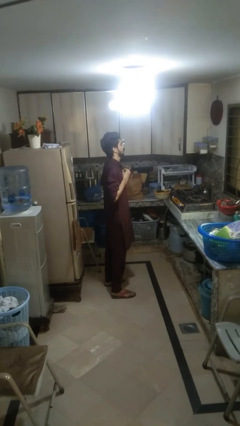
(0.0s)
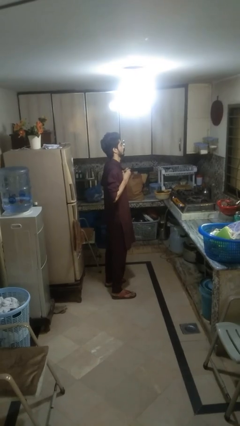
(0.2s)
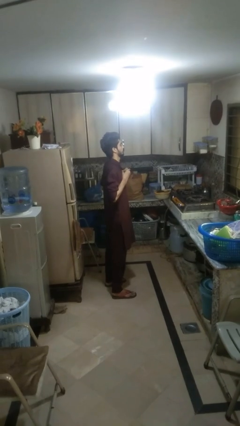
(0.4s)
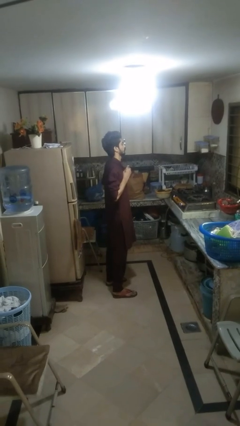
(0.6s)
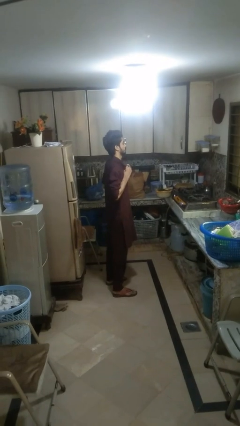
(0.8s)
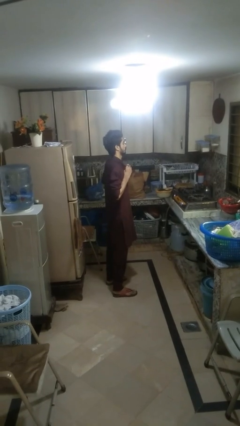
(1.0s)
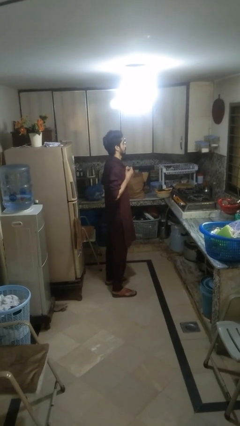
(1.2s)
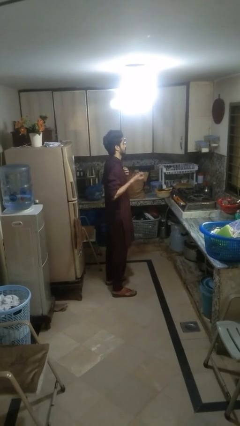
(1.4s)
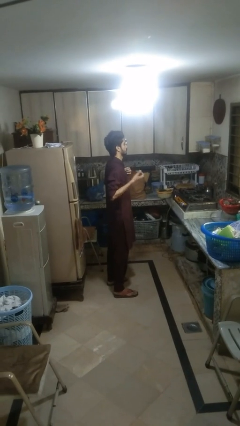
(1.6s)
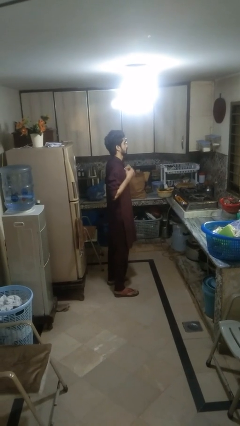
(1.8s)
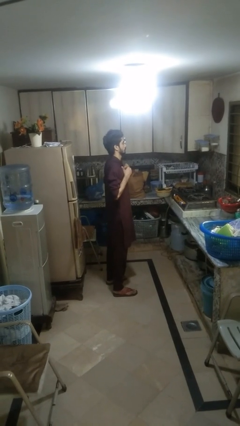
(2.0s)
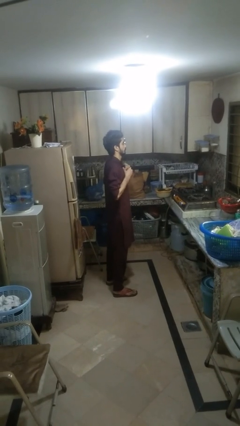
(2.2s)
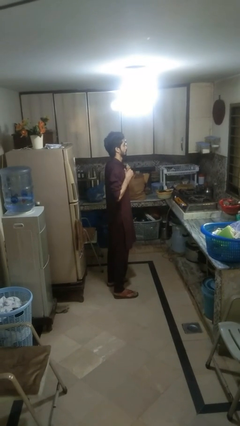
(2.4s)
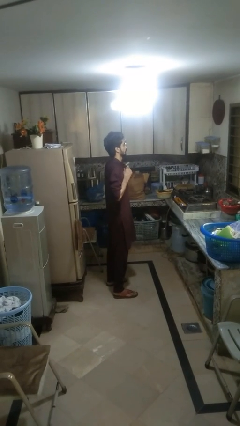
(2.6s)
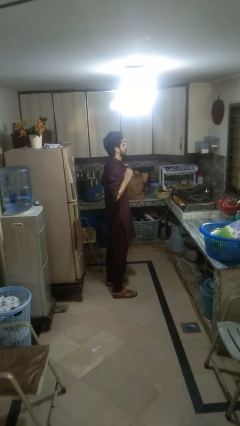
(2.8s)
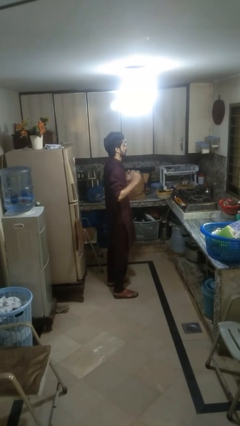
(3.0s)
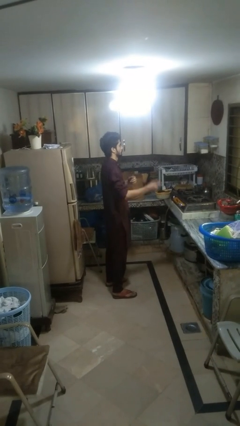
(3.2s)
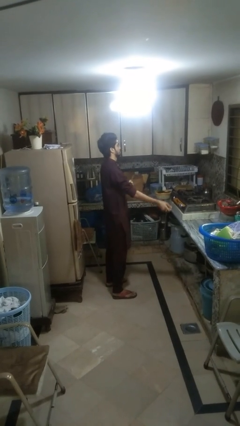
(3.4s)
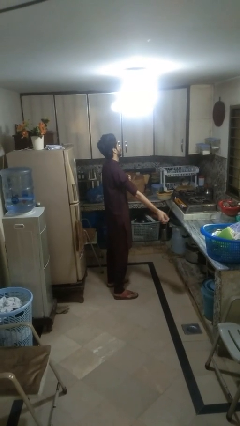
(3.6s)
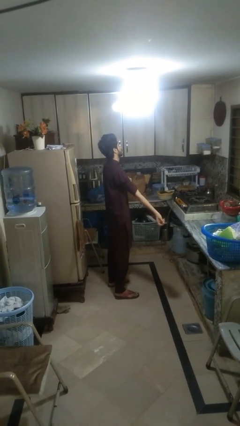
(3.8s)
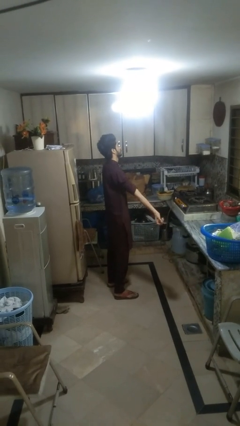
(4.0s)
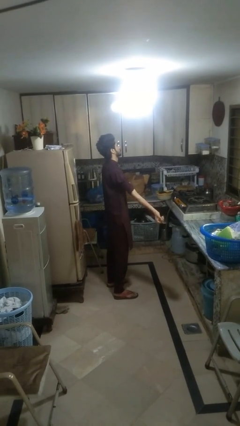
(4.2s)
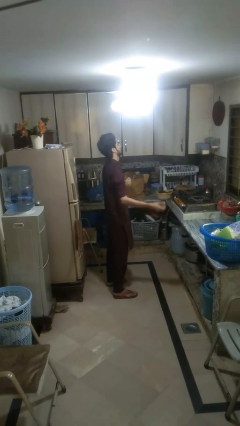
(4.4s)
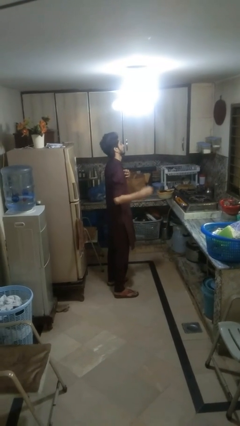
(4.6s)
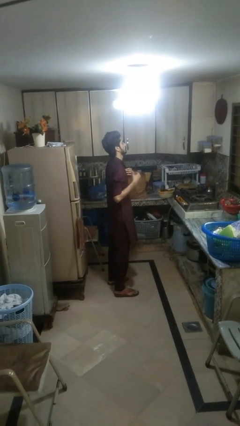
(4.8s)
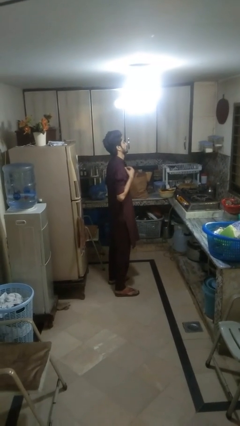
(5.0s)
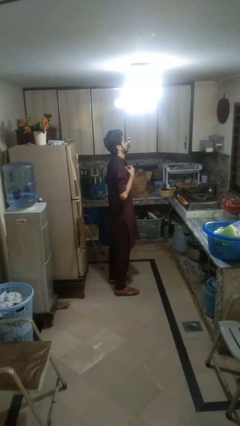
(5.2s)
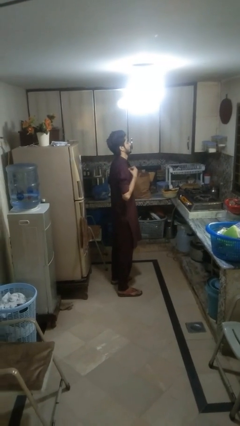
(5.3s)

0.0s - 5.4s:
person unbuttons shirt

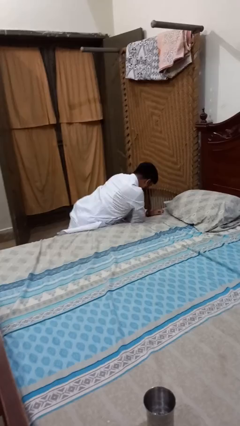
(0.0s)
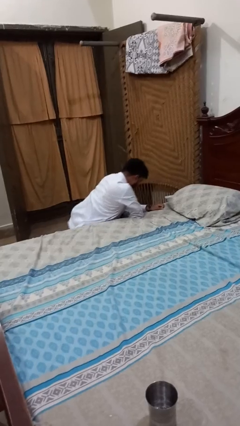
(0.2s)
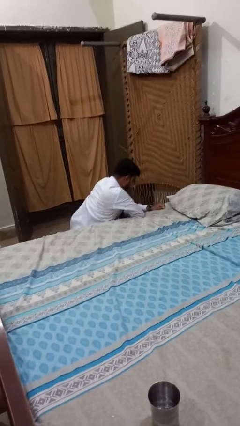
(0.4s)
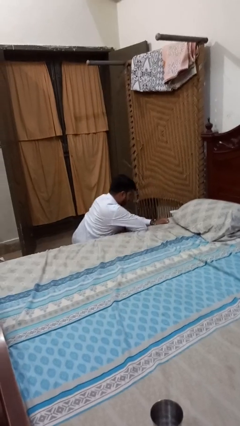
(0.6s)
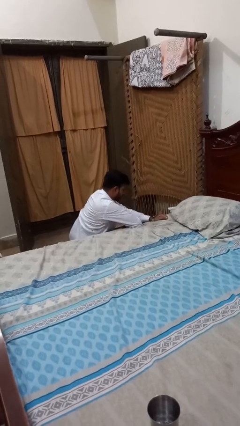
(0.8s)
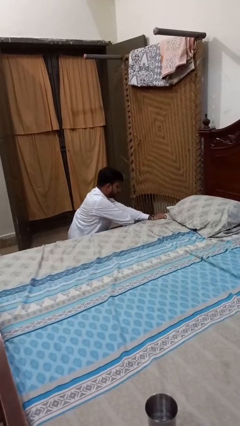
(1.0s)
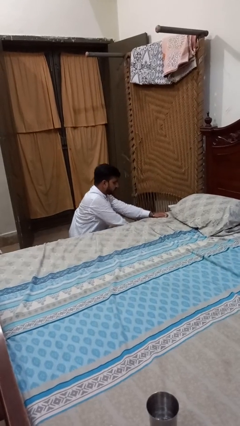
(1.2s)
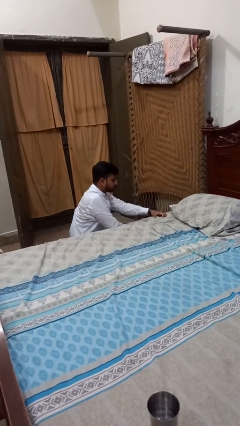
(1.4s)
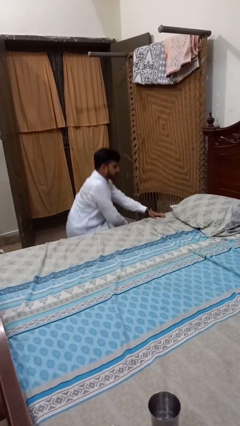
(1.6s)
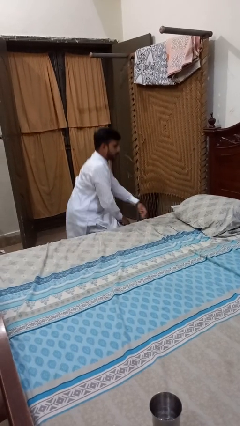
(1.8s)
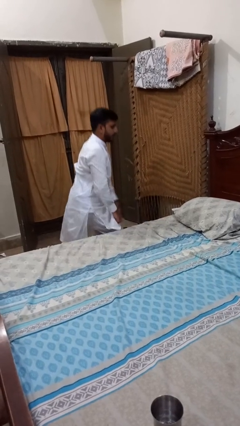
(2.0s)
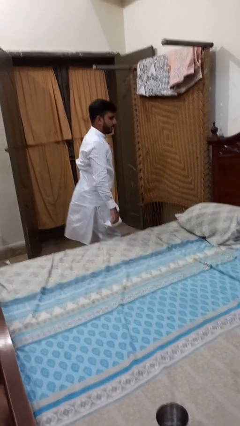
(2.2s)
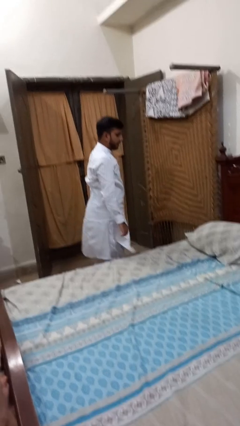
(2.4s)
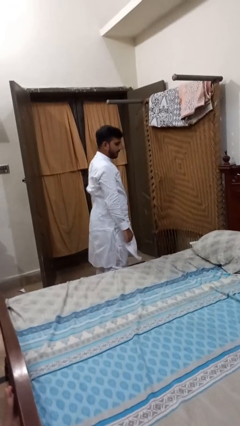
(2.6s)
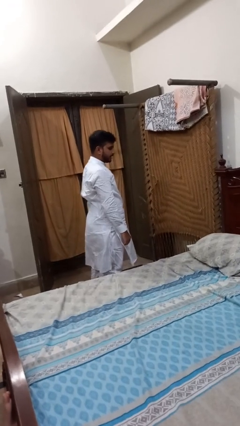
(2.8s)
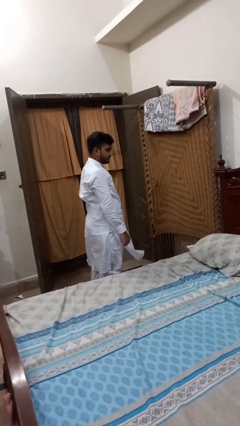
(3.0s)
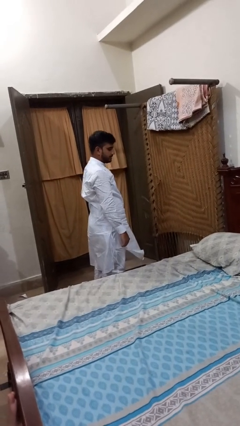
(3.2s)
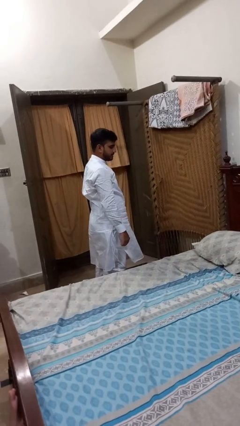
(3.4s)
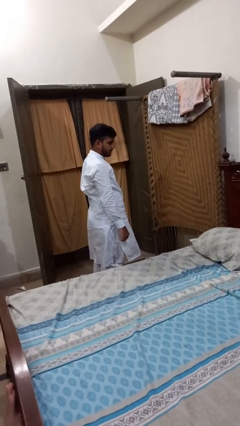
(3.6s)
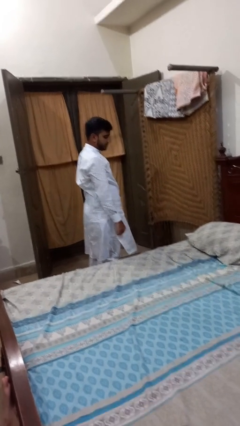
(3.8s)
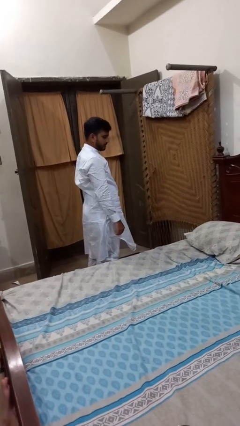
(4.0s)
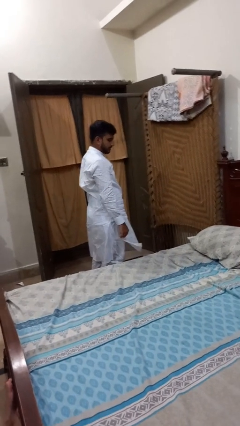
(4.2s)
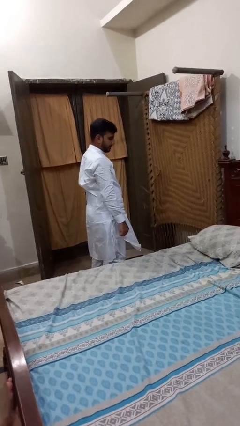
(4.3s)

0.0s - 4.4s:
person stands up from floor

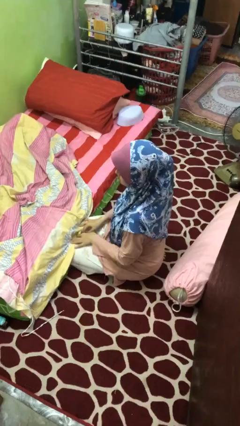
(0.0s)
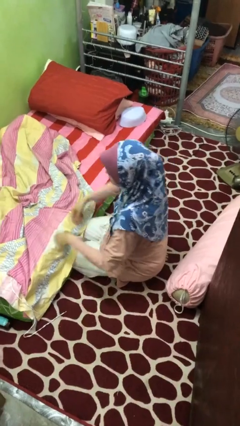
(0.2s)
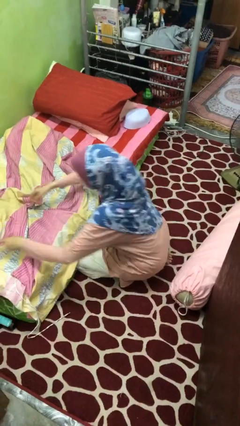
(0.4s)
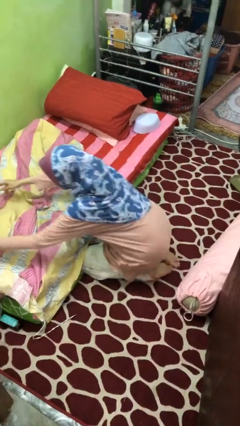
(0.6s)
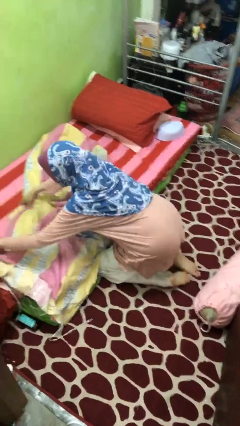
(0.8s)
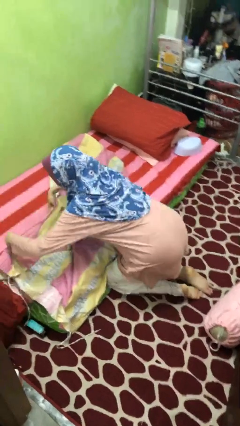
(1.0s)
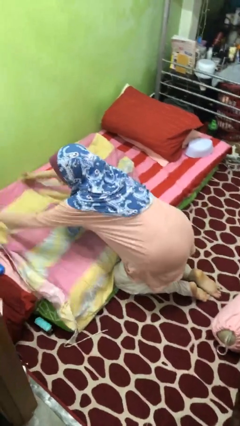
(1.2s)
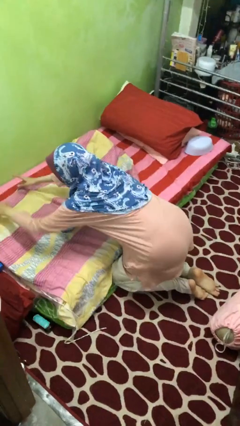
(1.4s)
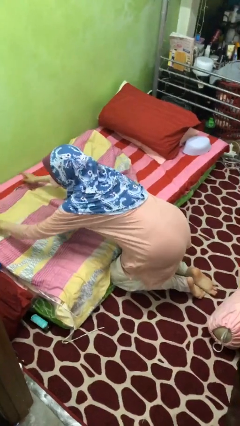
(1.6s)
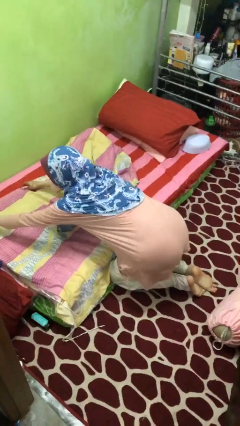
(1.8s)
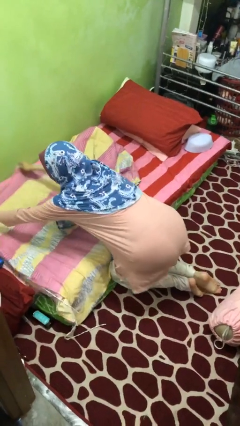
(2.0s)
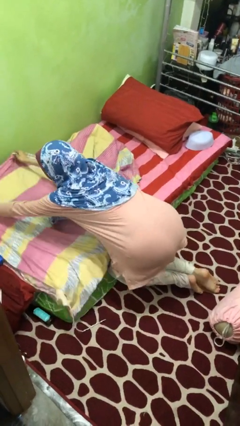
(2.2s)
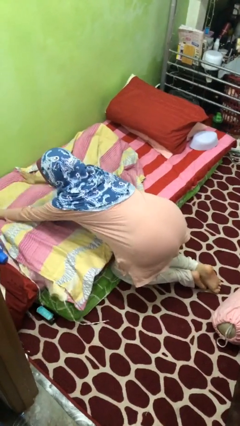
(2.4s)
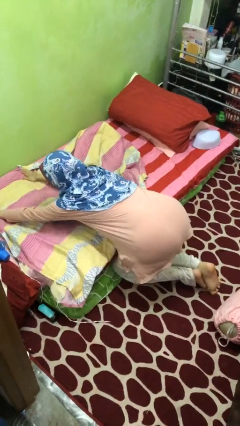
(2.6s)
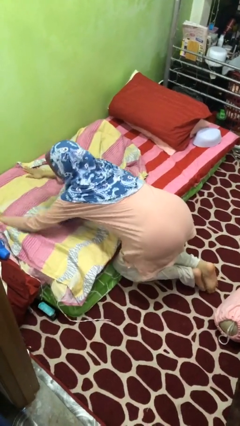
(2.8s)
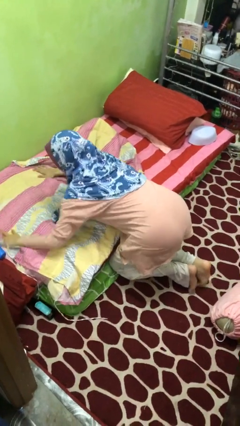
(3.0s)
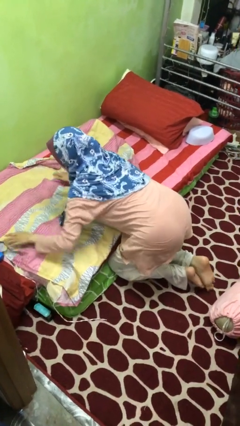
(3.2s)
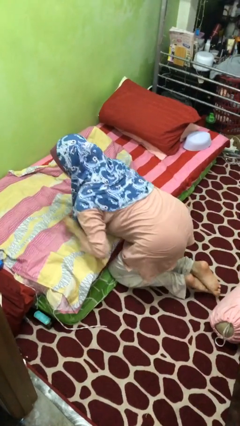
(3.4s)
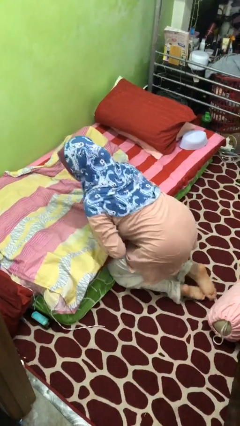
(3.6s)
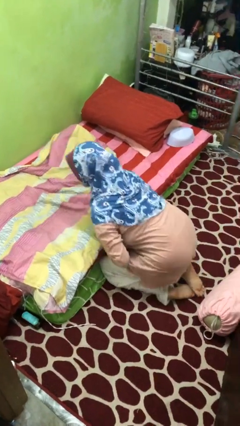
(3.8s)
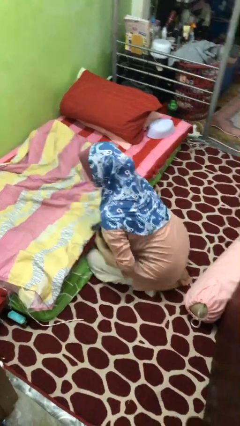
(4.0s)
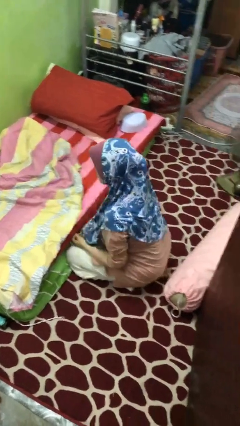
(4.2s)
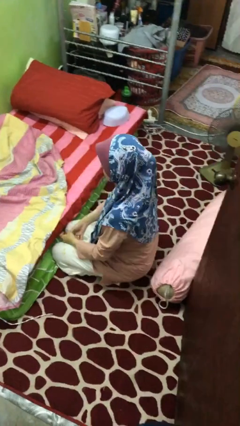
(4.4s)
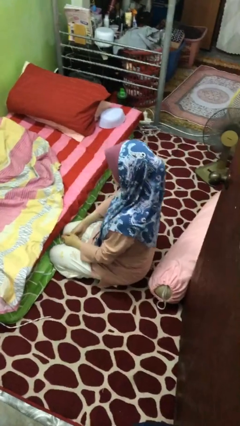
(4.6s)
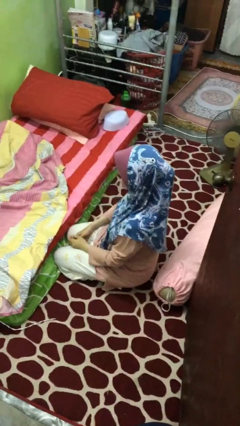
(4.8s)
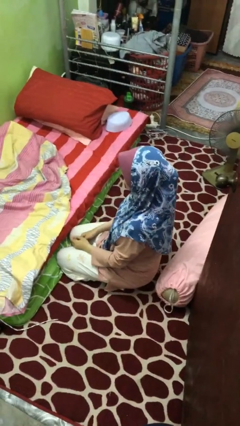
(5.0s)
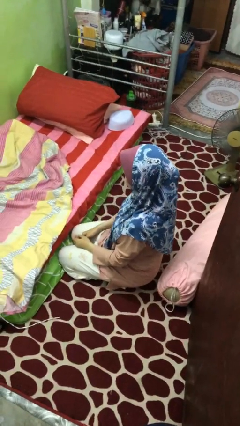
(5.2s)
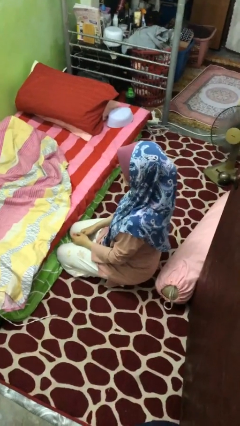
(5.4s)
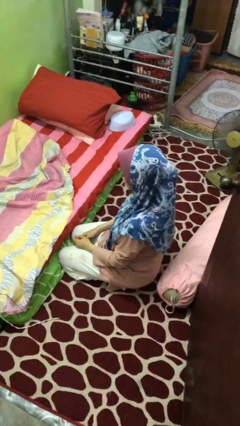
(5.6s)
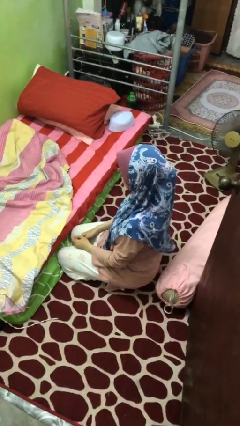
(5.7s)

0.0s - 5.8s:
person makes bed

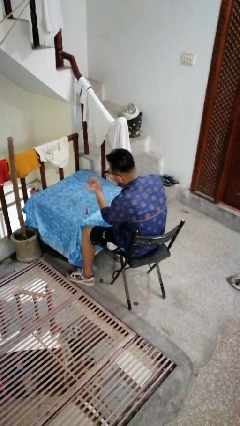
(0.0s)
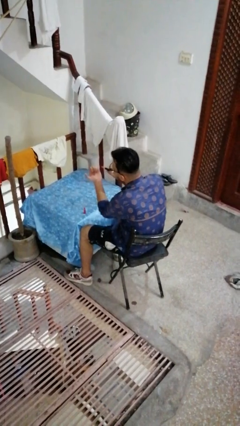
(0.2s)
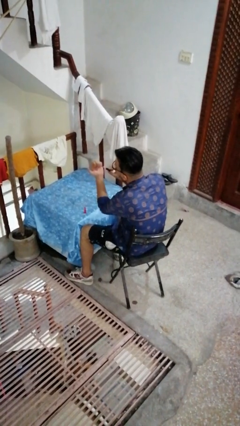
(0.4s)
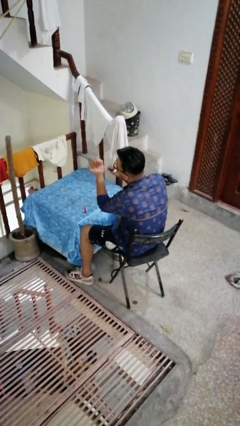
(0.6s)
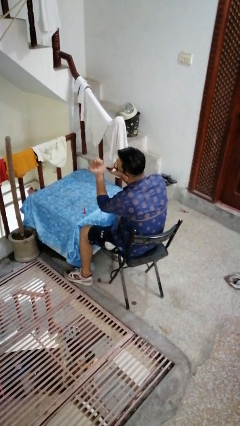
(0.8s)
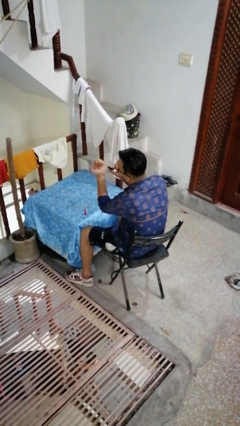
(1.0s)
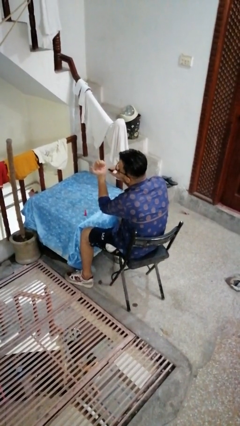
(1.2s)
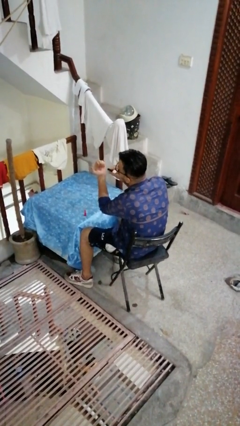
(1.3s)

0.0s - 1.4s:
person paints fingernails

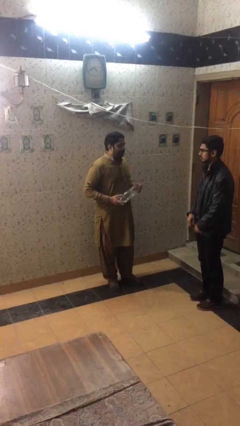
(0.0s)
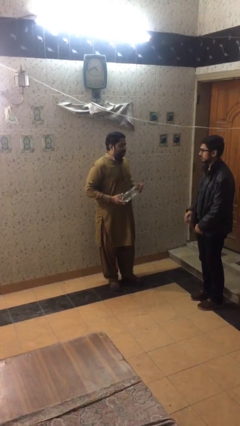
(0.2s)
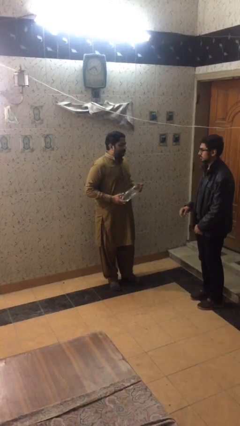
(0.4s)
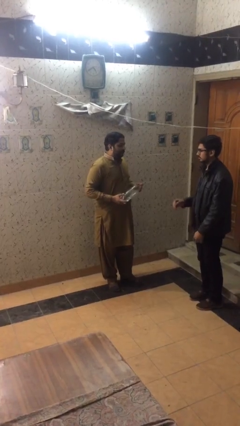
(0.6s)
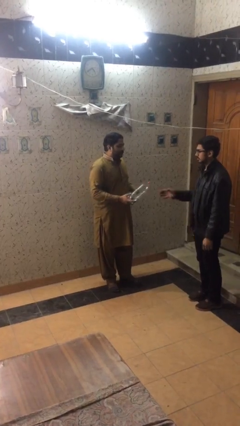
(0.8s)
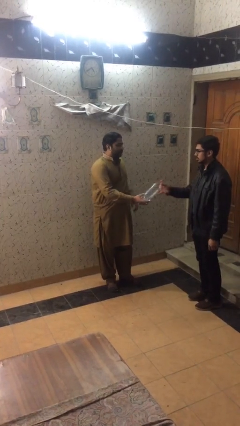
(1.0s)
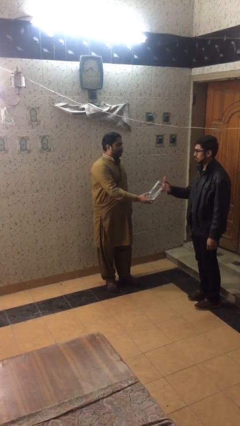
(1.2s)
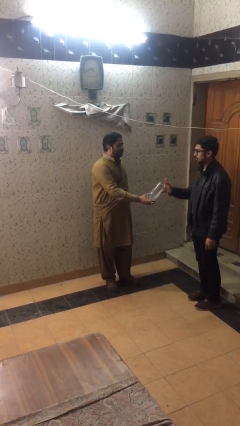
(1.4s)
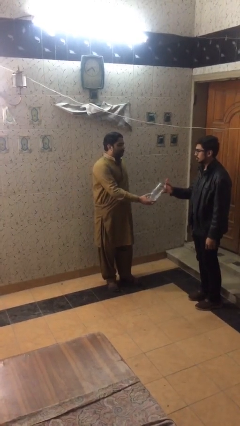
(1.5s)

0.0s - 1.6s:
person transfers object to person
